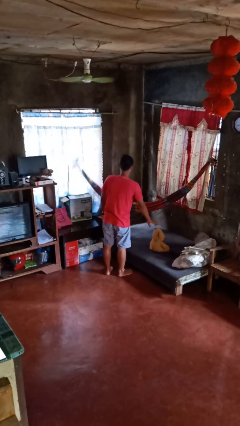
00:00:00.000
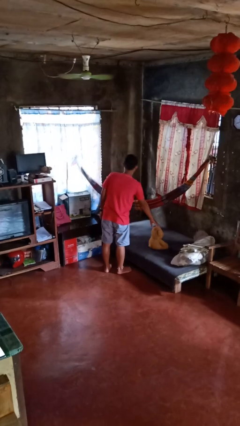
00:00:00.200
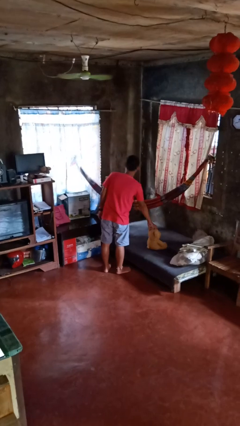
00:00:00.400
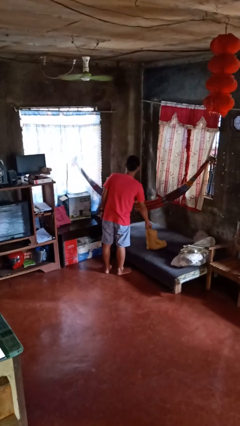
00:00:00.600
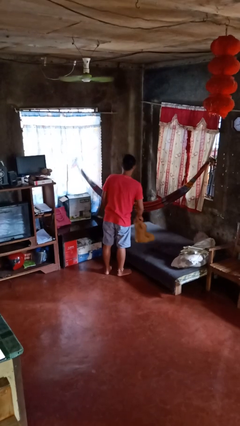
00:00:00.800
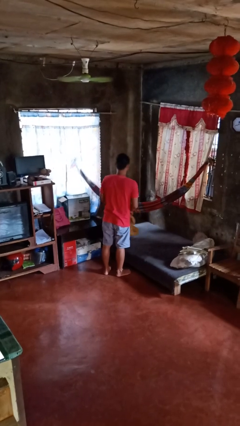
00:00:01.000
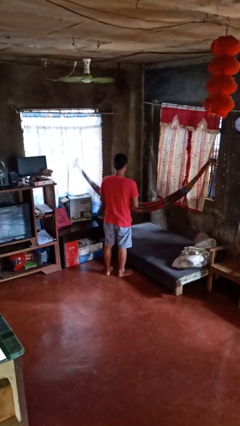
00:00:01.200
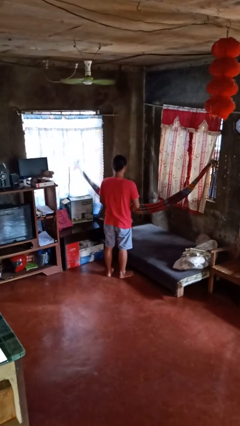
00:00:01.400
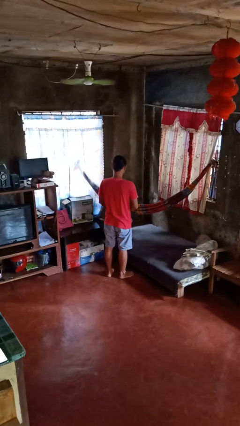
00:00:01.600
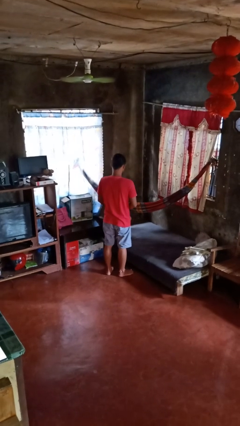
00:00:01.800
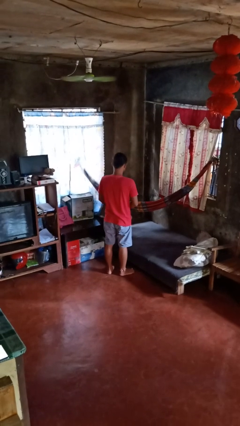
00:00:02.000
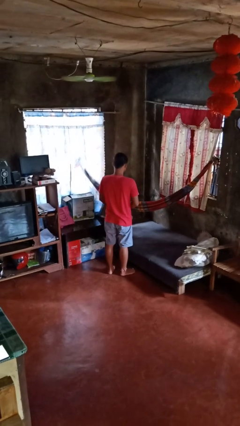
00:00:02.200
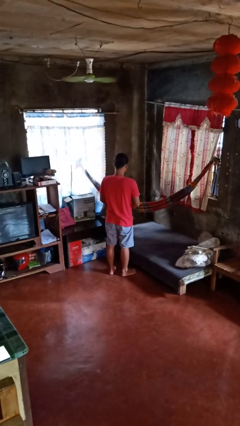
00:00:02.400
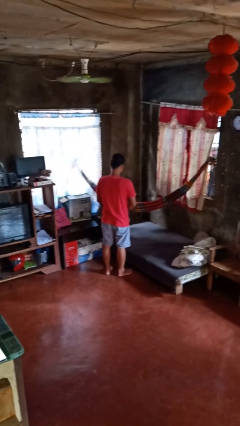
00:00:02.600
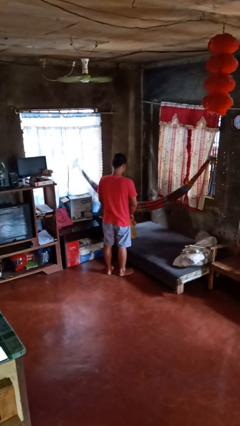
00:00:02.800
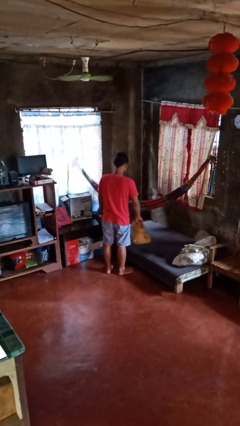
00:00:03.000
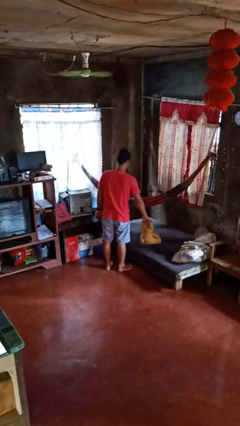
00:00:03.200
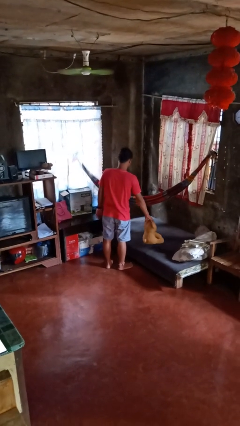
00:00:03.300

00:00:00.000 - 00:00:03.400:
person picks up object from bed

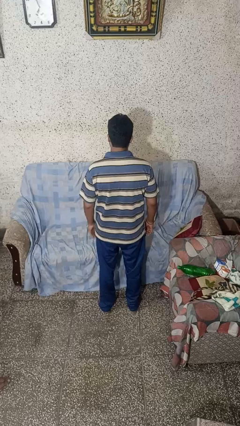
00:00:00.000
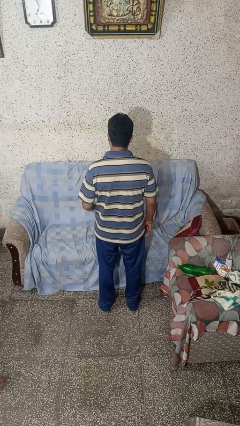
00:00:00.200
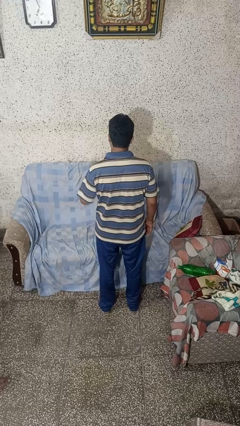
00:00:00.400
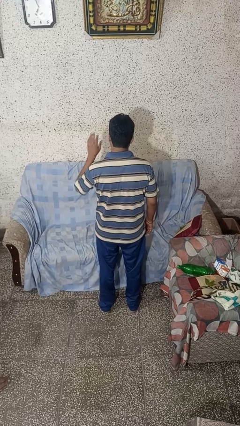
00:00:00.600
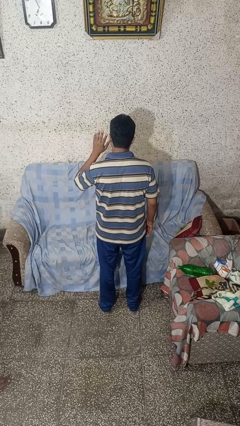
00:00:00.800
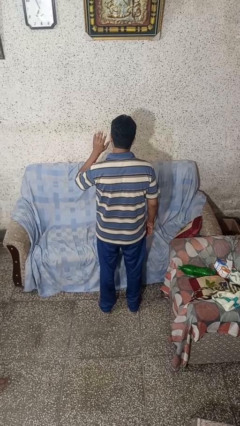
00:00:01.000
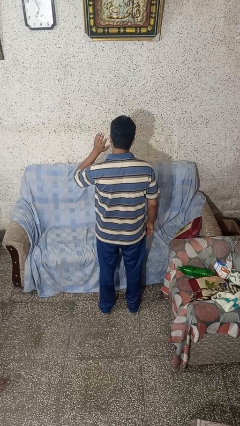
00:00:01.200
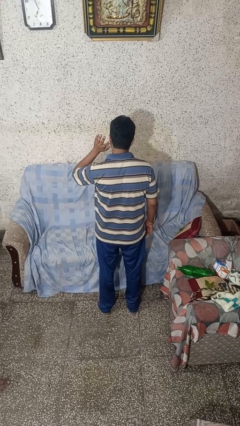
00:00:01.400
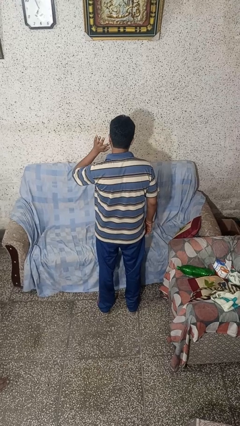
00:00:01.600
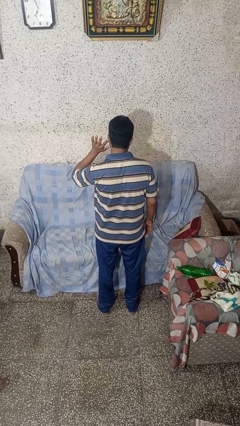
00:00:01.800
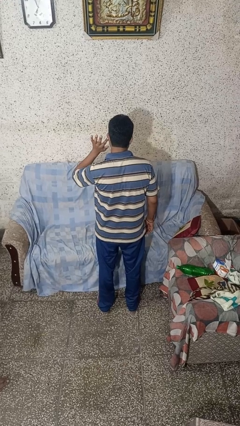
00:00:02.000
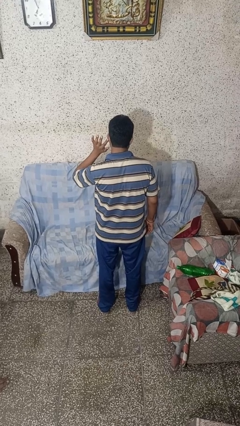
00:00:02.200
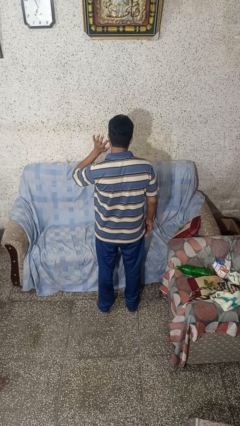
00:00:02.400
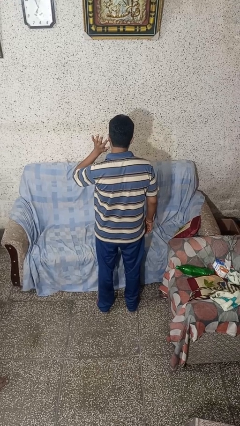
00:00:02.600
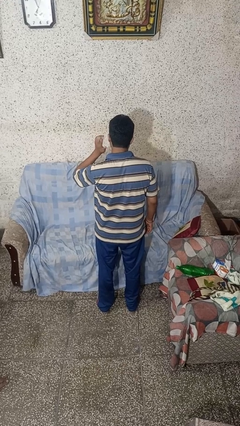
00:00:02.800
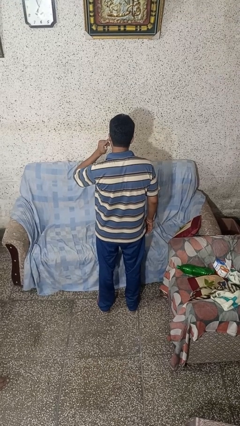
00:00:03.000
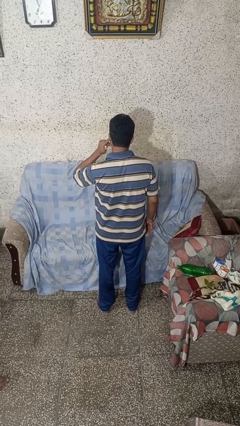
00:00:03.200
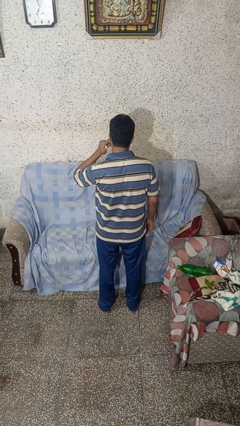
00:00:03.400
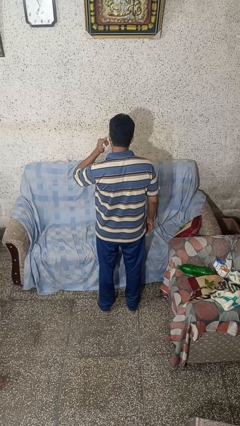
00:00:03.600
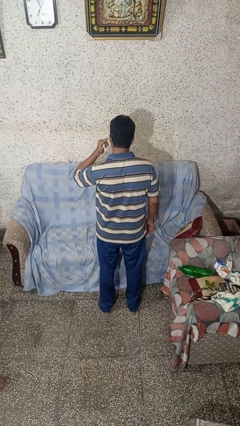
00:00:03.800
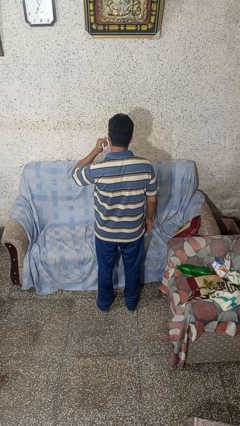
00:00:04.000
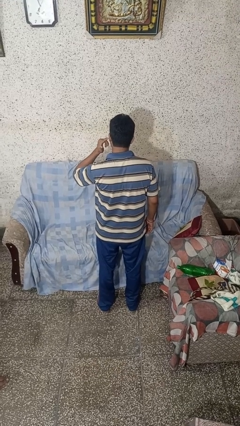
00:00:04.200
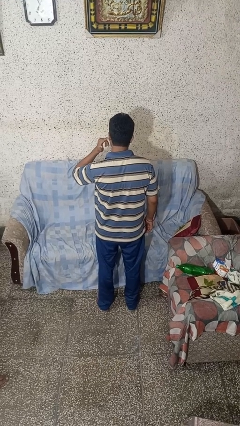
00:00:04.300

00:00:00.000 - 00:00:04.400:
person gestures listen closely

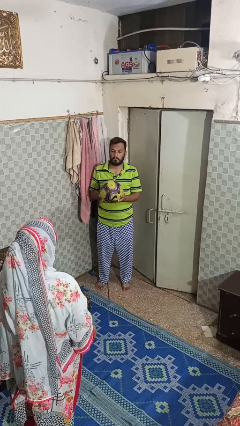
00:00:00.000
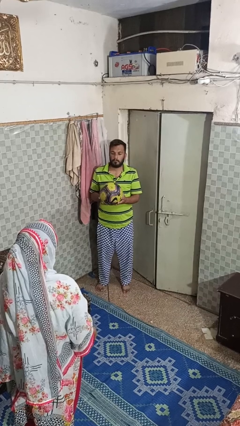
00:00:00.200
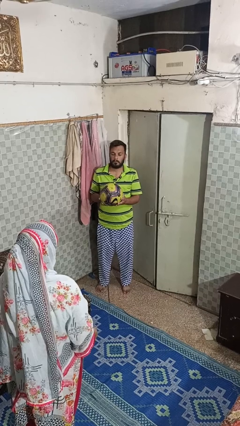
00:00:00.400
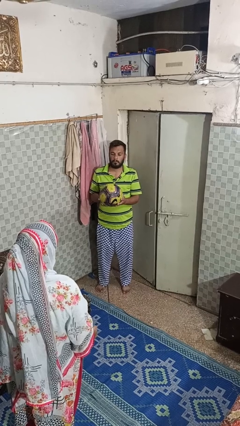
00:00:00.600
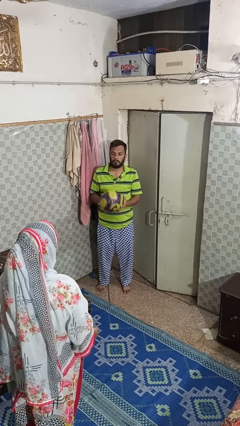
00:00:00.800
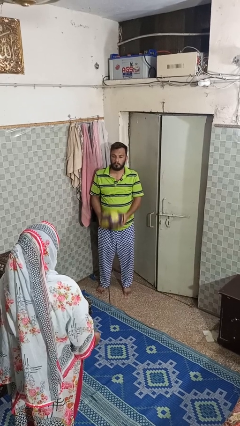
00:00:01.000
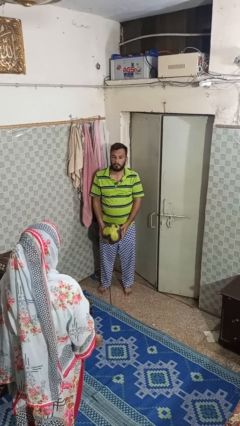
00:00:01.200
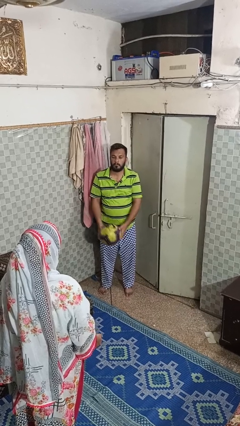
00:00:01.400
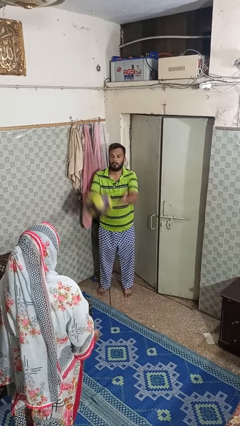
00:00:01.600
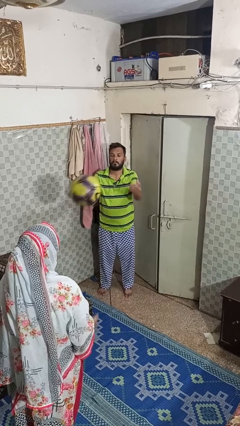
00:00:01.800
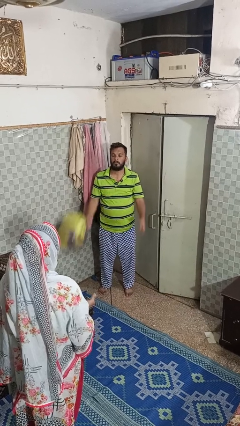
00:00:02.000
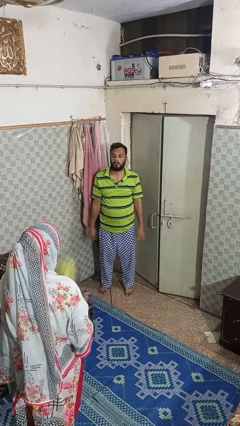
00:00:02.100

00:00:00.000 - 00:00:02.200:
person throws object to person

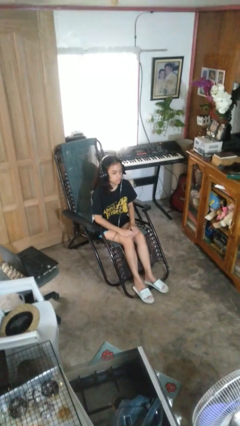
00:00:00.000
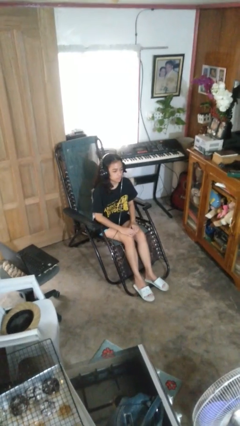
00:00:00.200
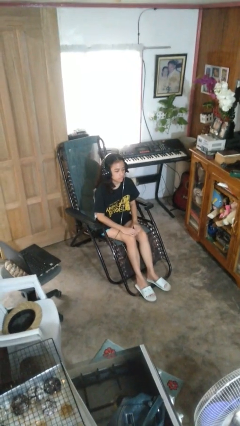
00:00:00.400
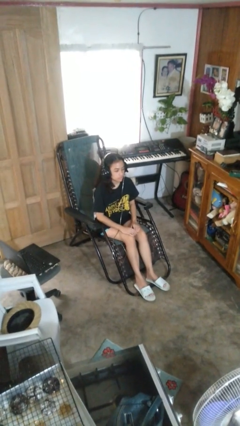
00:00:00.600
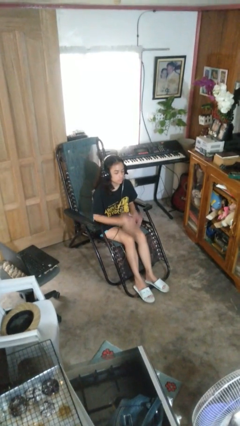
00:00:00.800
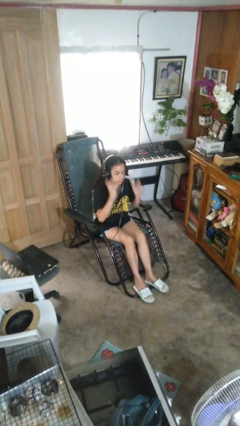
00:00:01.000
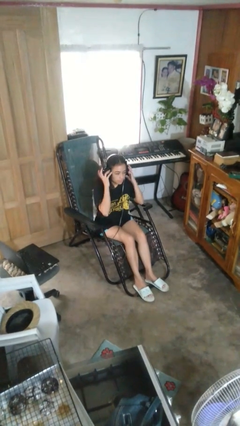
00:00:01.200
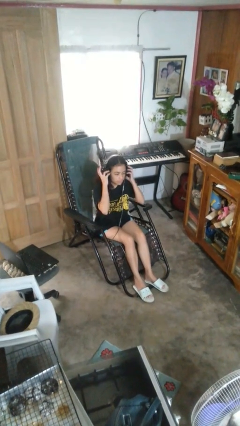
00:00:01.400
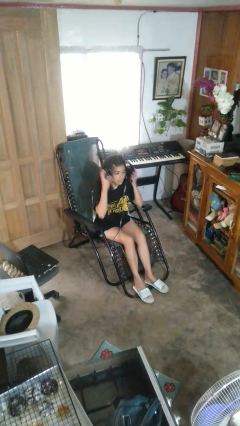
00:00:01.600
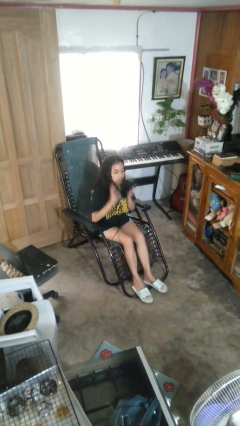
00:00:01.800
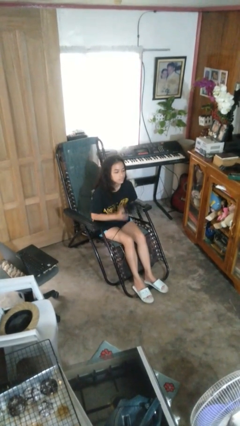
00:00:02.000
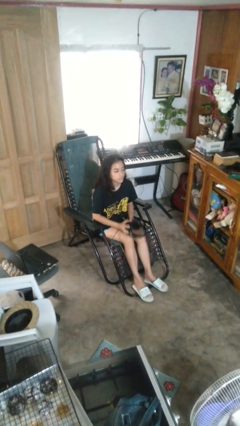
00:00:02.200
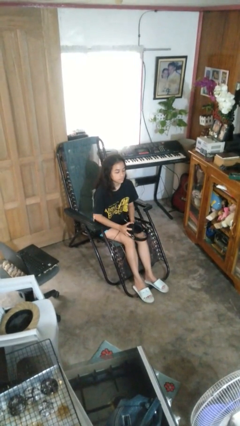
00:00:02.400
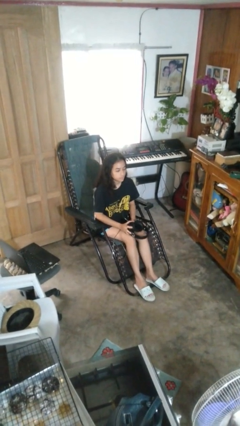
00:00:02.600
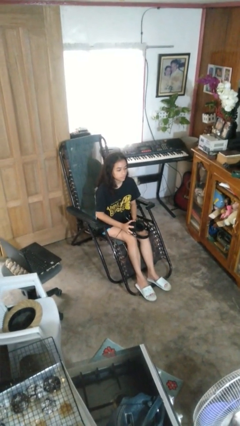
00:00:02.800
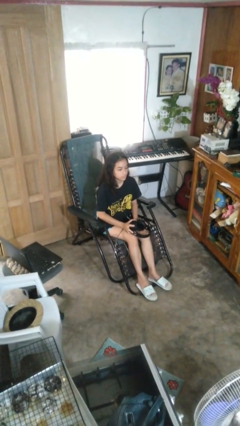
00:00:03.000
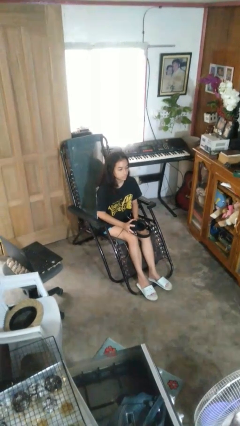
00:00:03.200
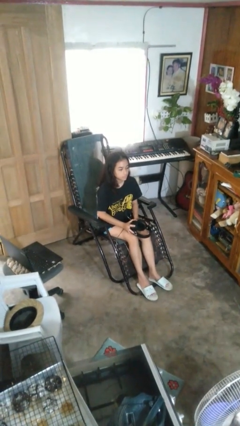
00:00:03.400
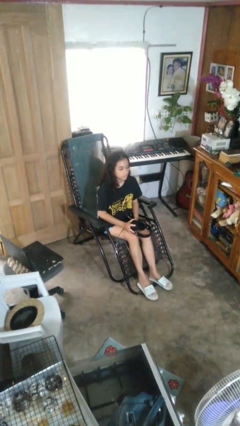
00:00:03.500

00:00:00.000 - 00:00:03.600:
person takes off headphones

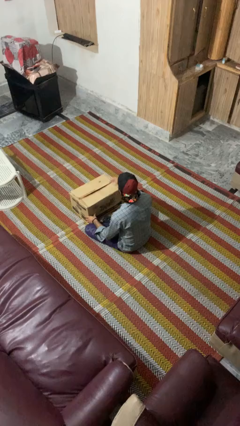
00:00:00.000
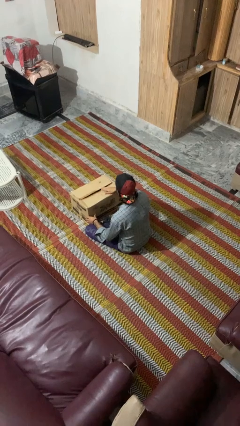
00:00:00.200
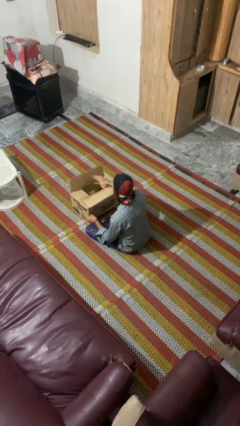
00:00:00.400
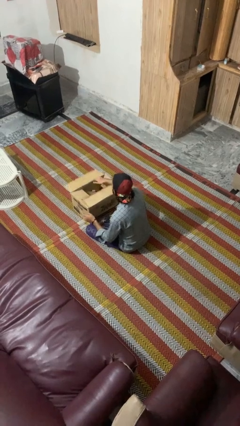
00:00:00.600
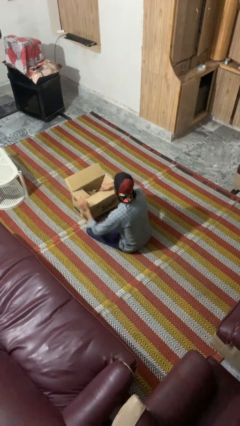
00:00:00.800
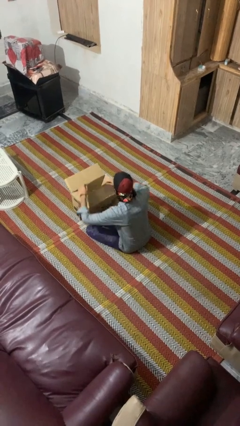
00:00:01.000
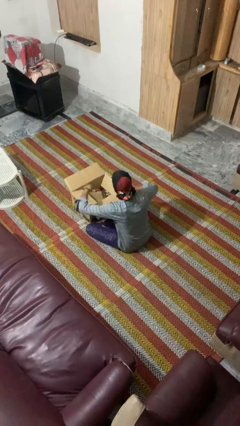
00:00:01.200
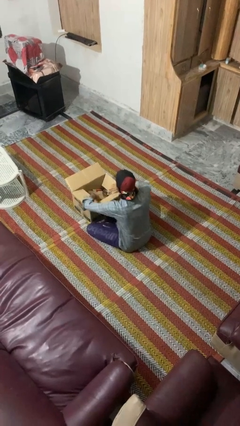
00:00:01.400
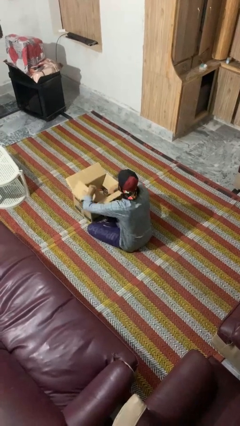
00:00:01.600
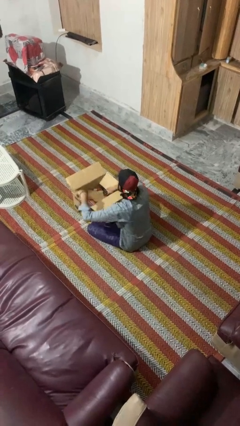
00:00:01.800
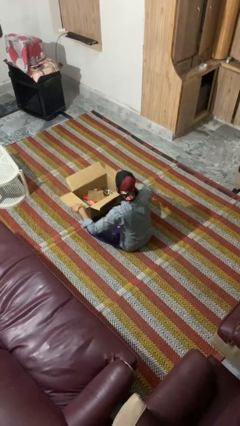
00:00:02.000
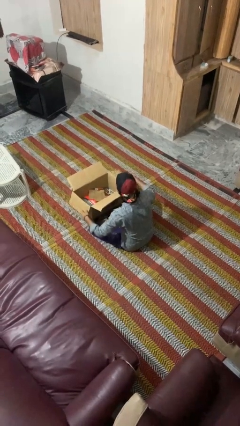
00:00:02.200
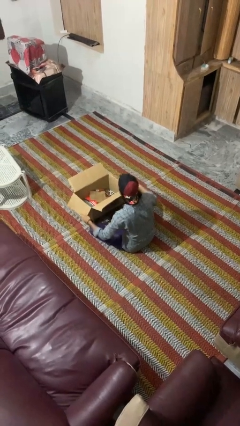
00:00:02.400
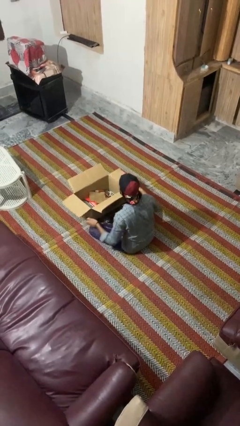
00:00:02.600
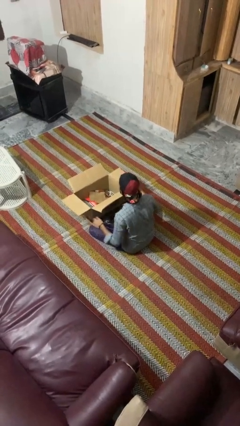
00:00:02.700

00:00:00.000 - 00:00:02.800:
person opens box

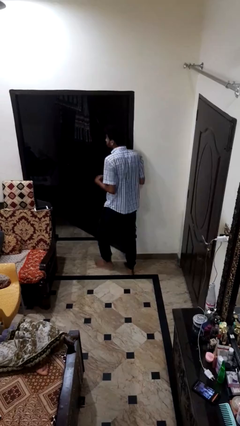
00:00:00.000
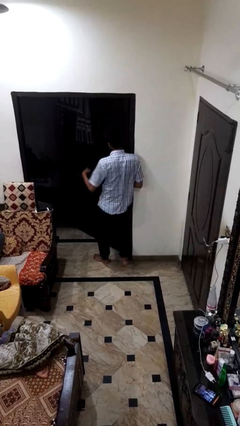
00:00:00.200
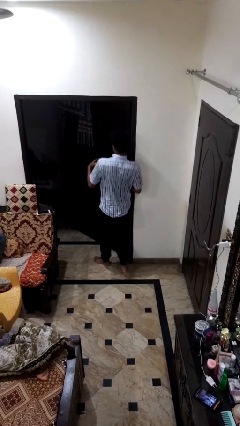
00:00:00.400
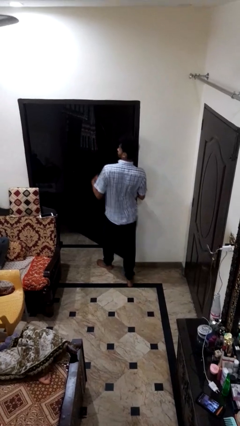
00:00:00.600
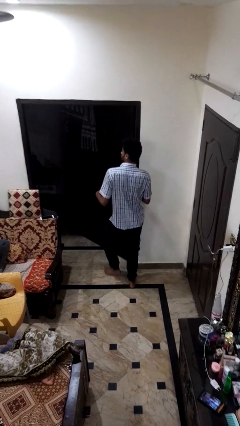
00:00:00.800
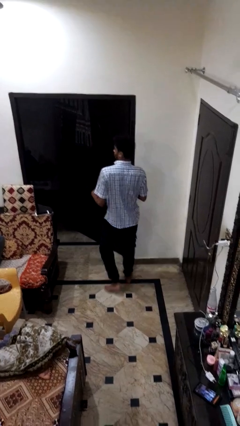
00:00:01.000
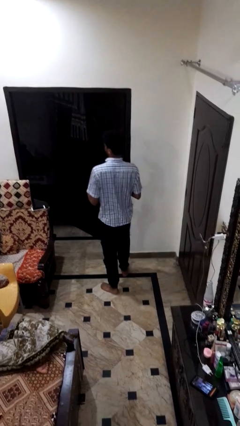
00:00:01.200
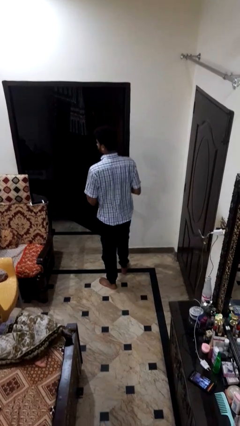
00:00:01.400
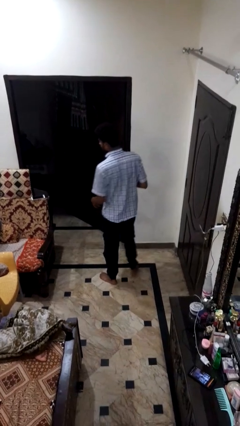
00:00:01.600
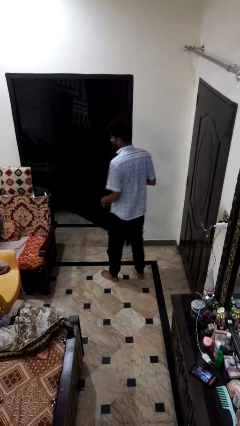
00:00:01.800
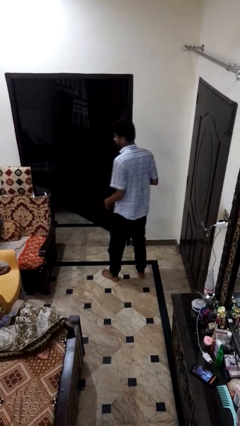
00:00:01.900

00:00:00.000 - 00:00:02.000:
person bumps into wall
